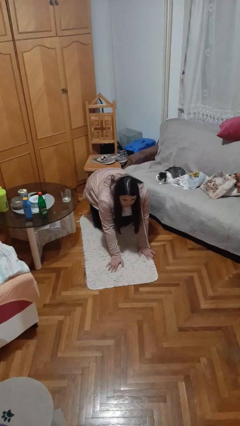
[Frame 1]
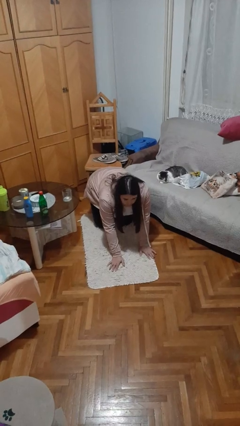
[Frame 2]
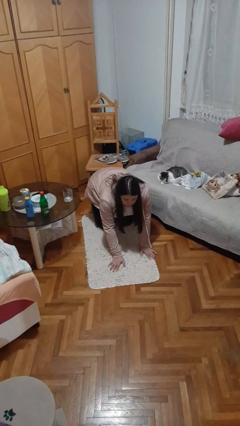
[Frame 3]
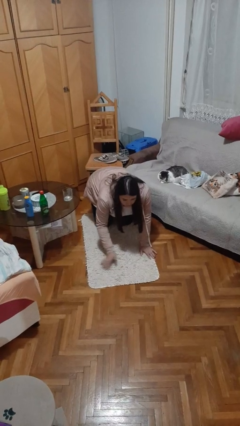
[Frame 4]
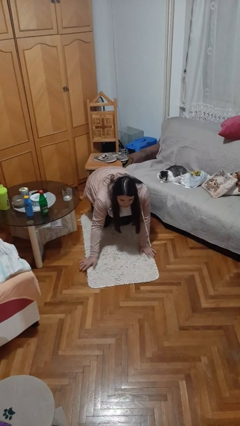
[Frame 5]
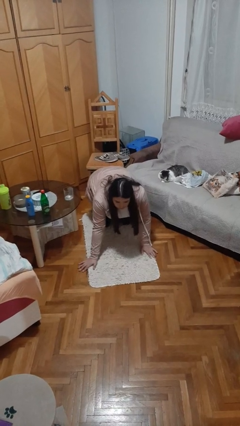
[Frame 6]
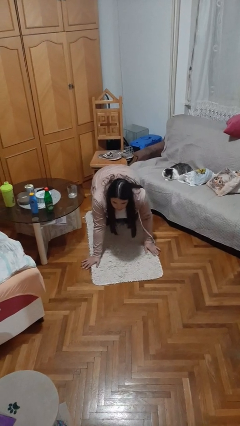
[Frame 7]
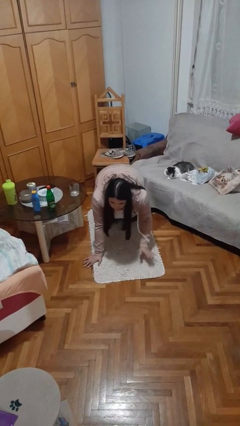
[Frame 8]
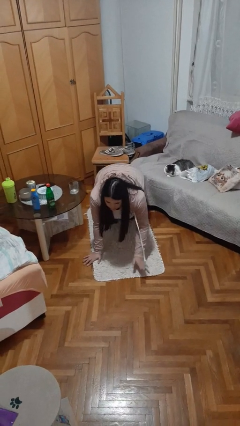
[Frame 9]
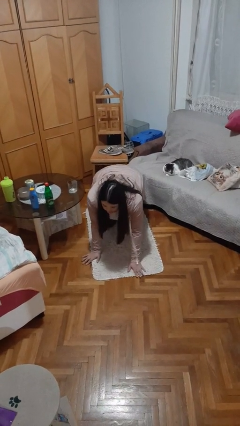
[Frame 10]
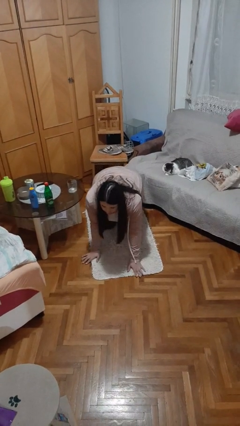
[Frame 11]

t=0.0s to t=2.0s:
person crawls

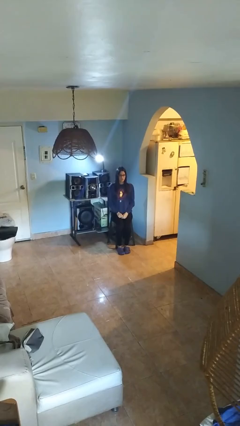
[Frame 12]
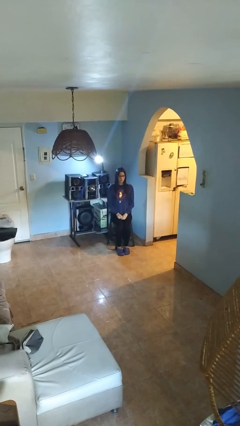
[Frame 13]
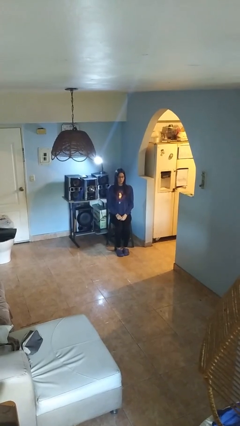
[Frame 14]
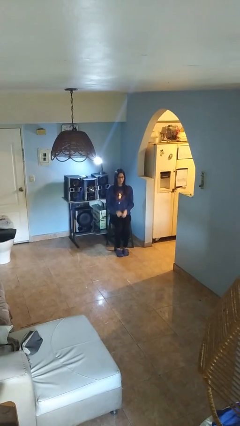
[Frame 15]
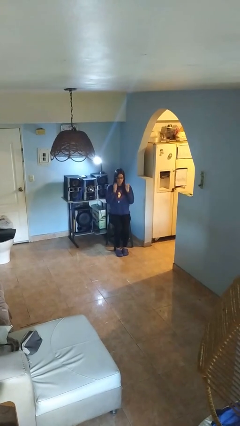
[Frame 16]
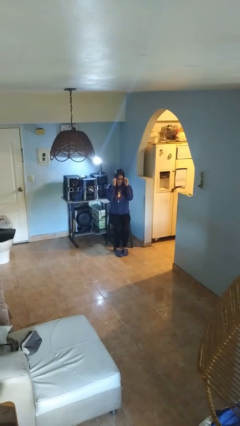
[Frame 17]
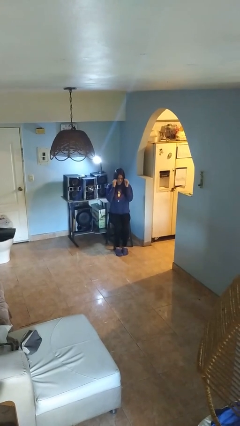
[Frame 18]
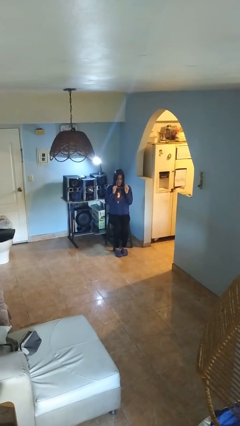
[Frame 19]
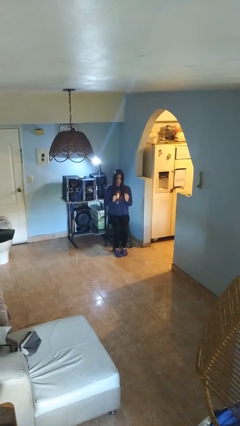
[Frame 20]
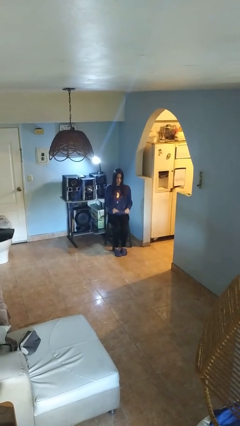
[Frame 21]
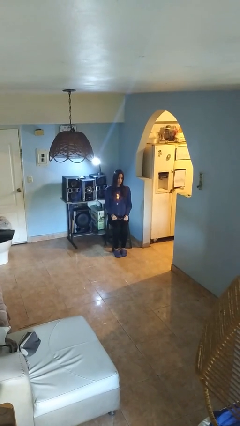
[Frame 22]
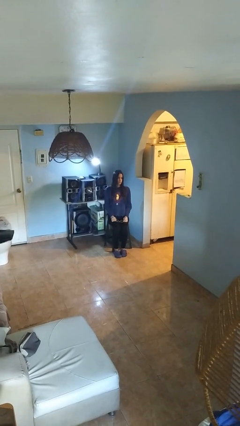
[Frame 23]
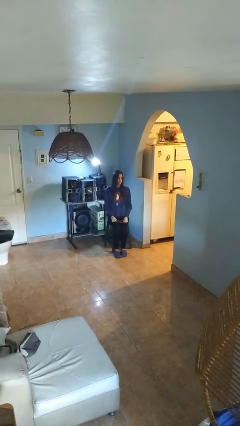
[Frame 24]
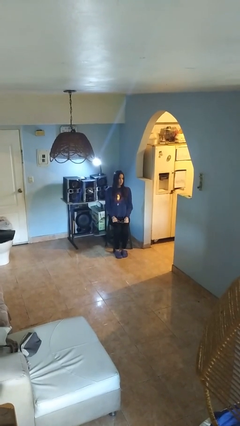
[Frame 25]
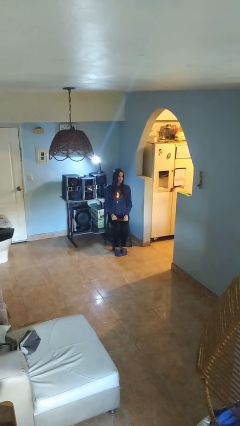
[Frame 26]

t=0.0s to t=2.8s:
person takes off glasses

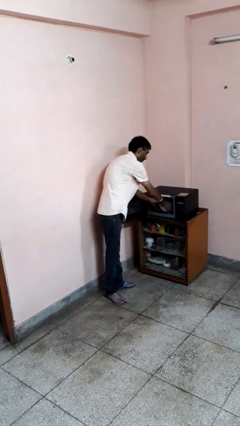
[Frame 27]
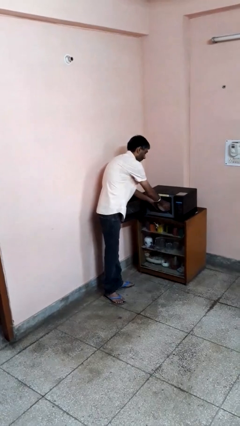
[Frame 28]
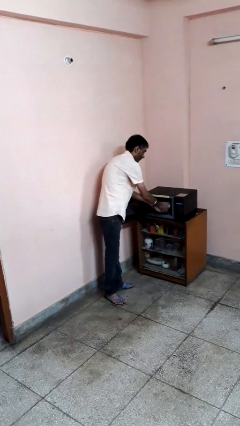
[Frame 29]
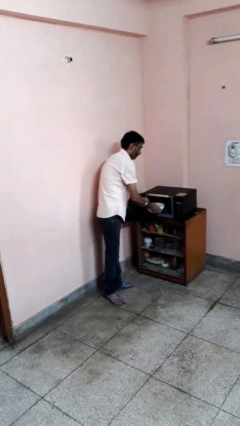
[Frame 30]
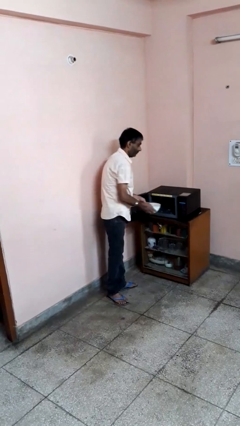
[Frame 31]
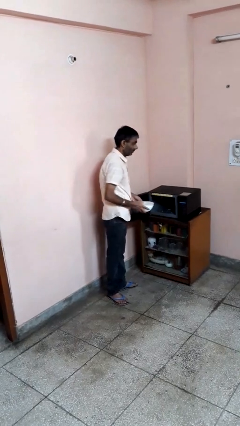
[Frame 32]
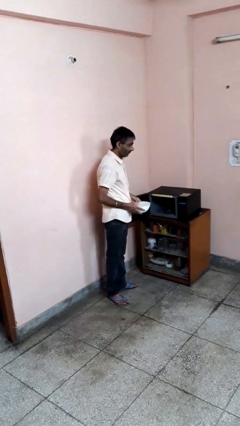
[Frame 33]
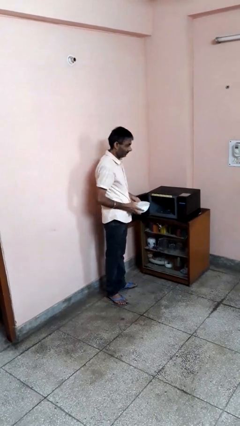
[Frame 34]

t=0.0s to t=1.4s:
person takes object from microwave

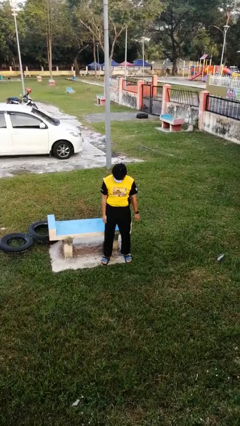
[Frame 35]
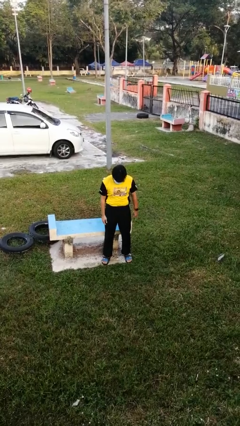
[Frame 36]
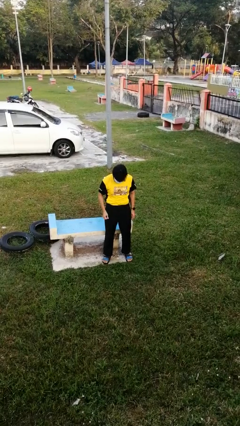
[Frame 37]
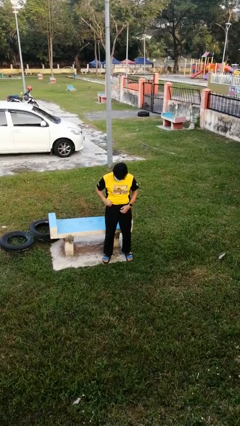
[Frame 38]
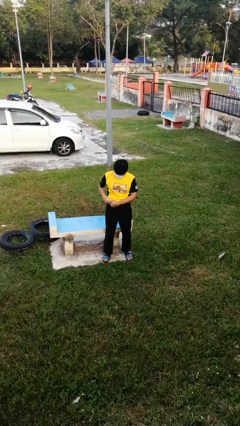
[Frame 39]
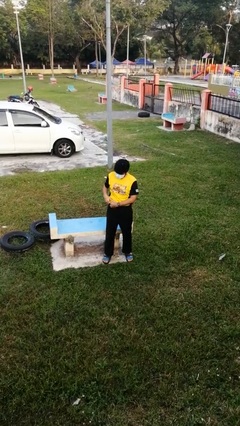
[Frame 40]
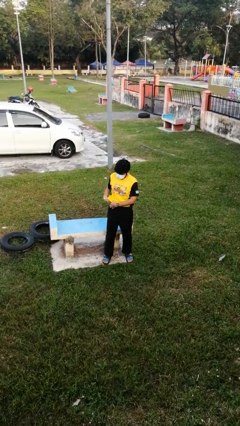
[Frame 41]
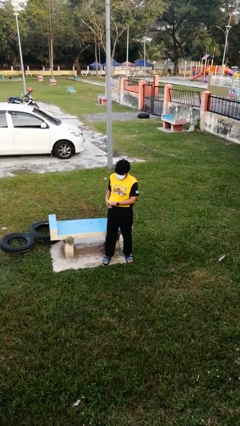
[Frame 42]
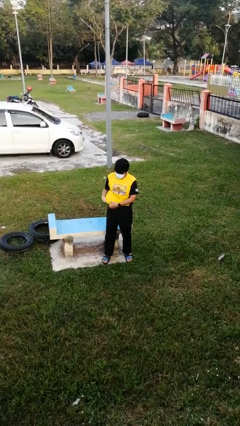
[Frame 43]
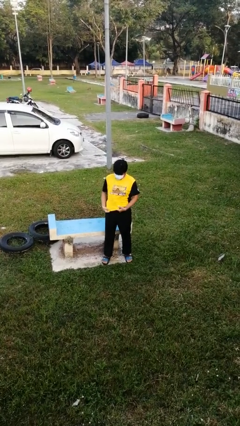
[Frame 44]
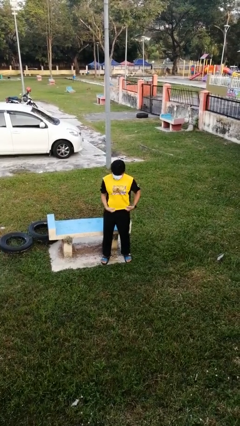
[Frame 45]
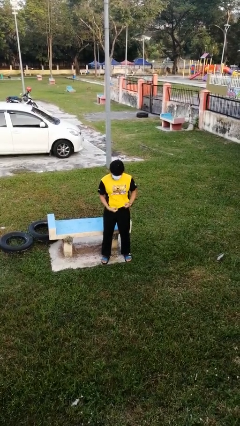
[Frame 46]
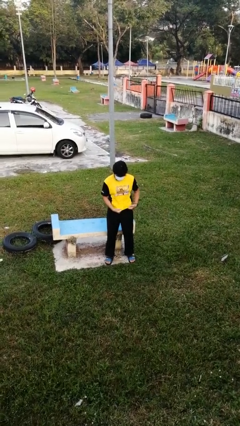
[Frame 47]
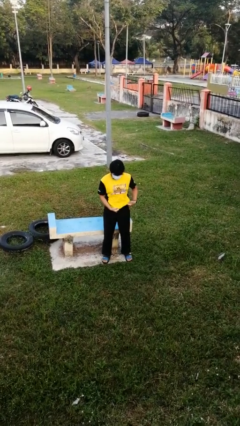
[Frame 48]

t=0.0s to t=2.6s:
person untucks shirt

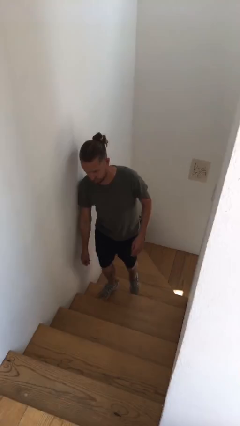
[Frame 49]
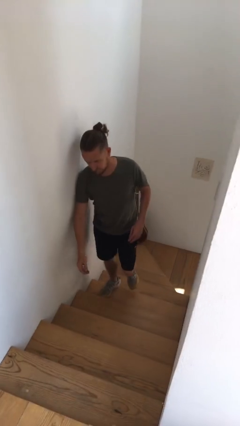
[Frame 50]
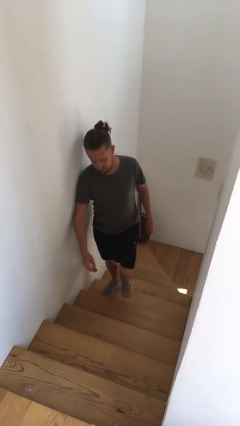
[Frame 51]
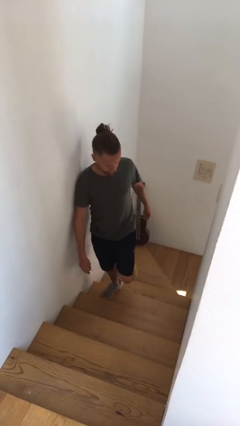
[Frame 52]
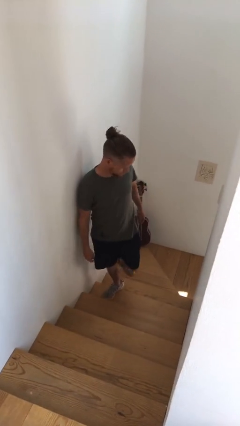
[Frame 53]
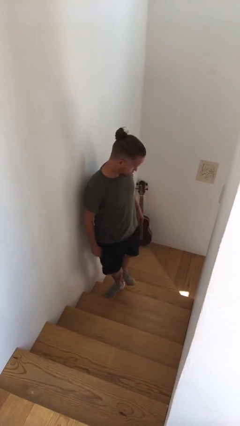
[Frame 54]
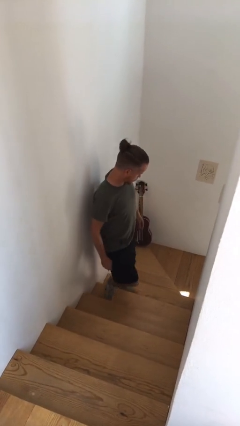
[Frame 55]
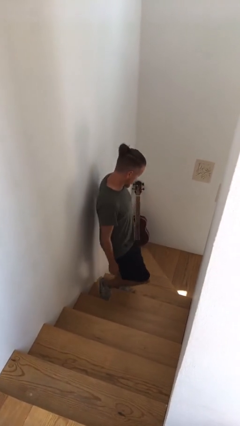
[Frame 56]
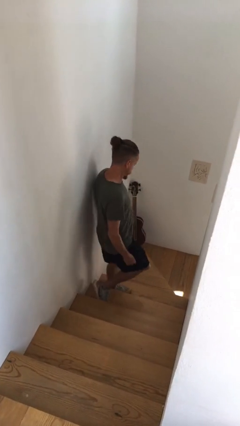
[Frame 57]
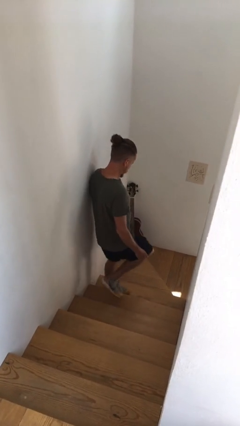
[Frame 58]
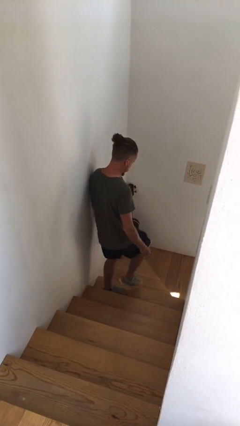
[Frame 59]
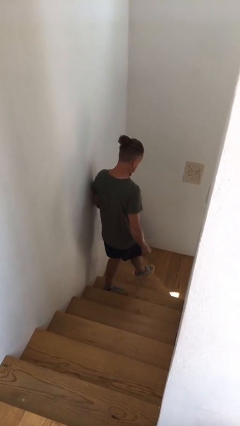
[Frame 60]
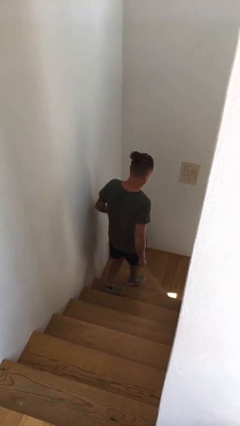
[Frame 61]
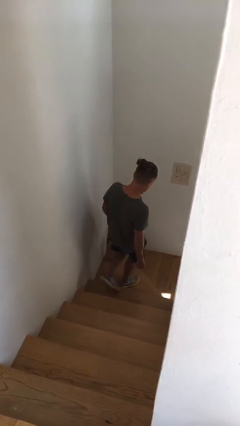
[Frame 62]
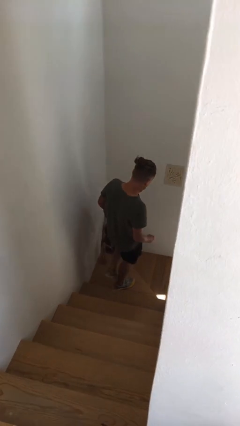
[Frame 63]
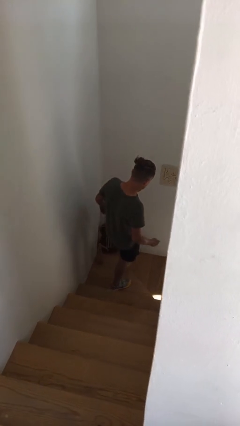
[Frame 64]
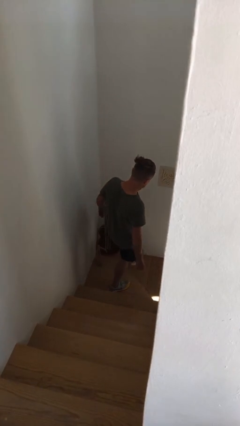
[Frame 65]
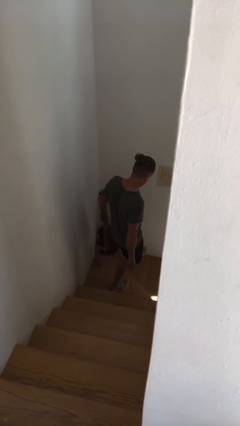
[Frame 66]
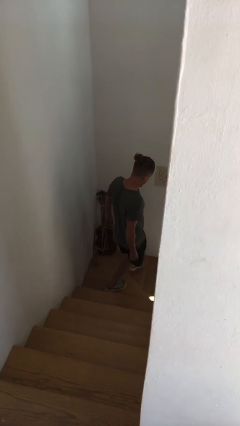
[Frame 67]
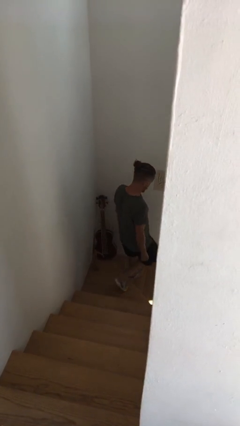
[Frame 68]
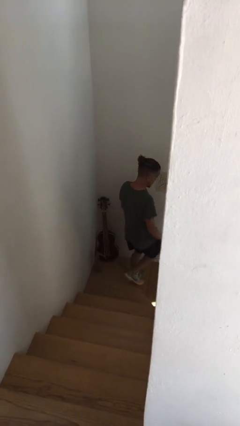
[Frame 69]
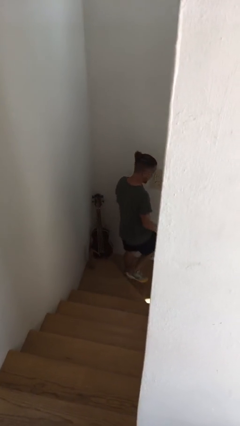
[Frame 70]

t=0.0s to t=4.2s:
person climbs down stairs

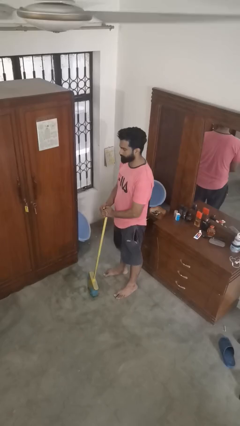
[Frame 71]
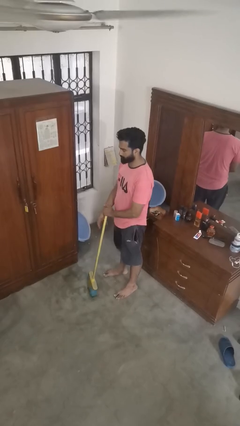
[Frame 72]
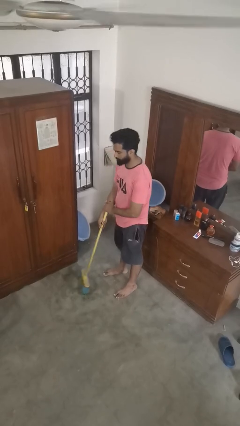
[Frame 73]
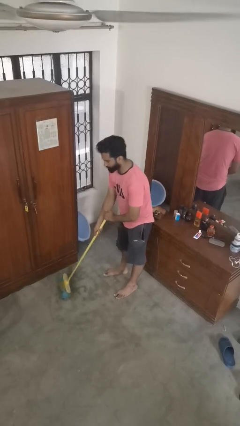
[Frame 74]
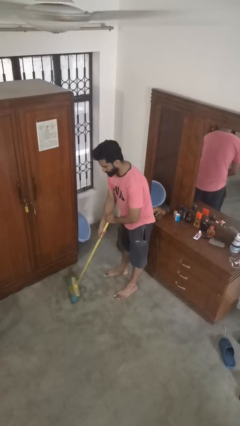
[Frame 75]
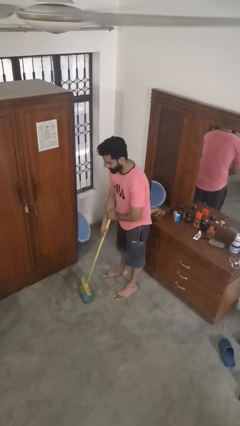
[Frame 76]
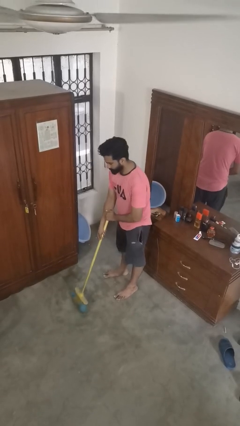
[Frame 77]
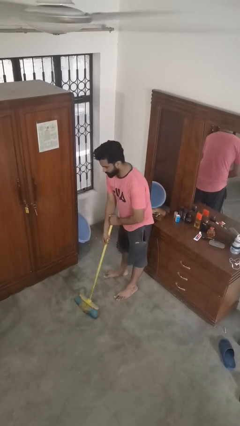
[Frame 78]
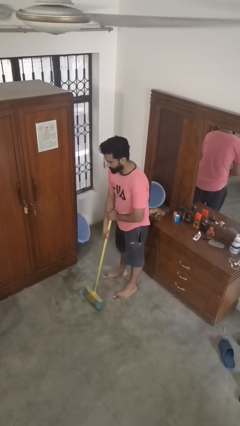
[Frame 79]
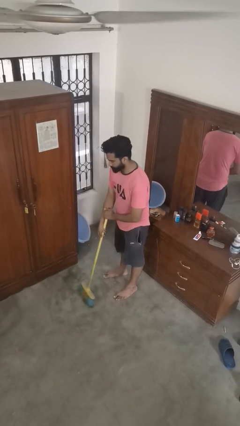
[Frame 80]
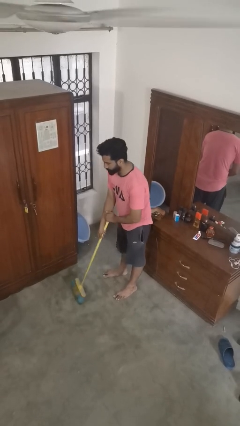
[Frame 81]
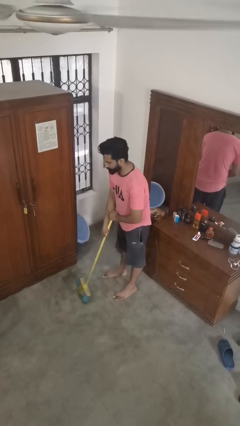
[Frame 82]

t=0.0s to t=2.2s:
person sweeps floor

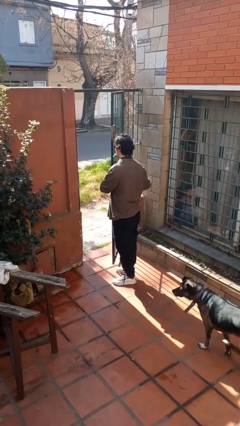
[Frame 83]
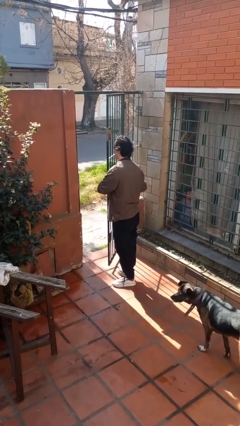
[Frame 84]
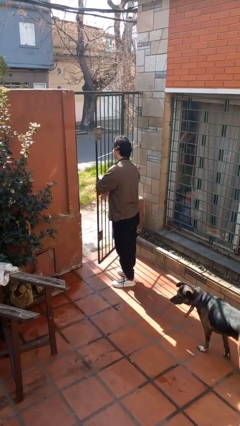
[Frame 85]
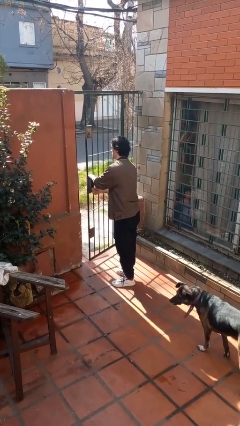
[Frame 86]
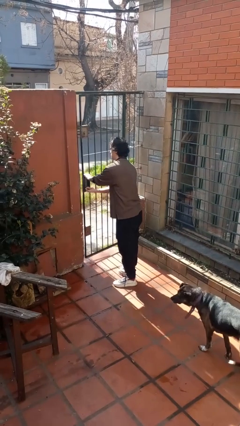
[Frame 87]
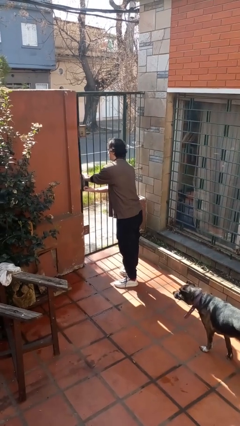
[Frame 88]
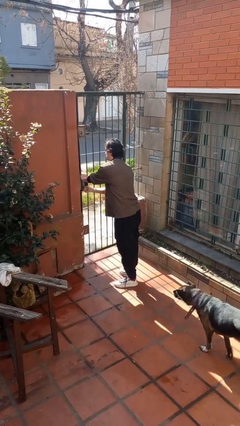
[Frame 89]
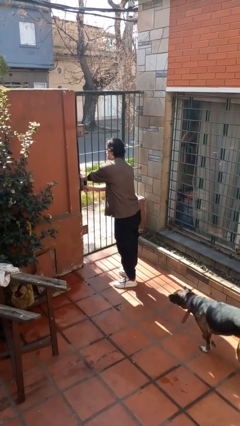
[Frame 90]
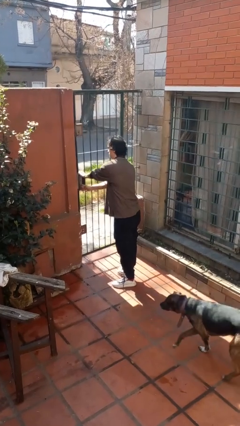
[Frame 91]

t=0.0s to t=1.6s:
person closes gate

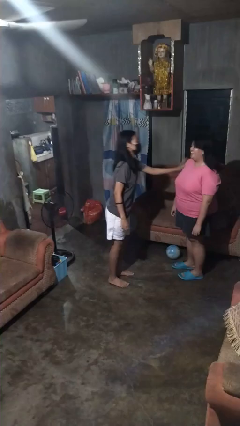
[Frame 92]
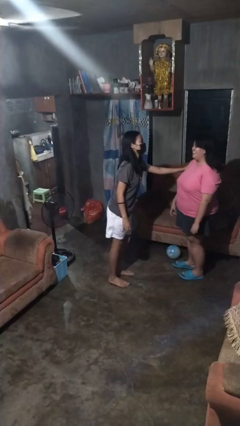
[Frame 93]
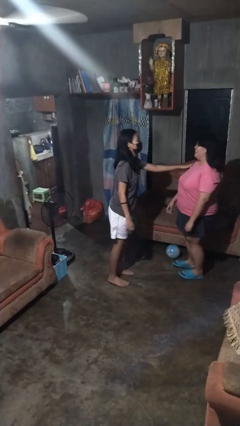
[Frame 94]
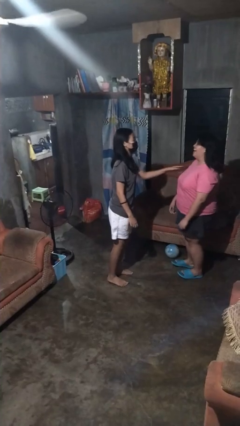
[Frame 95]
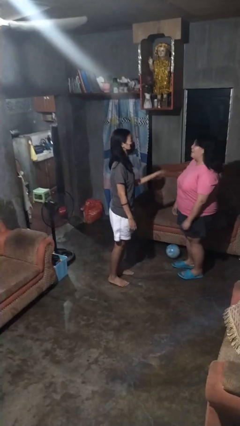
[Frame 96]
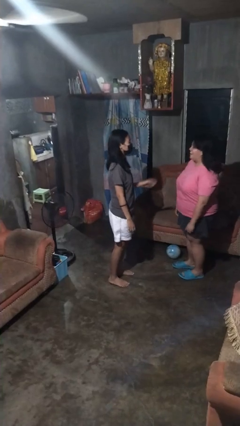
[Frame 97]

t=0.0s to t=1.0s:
person shoves person
